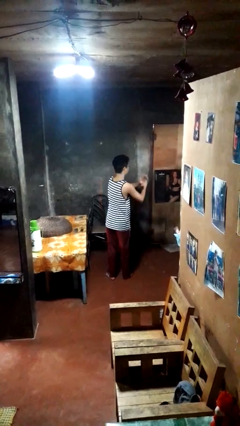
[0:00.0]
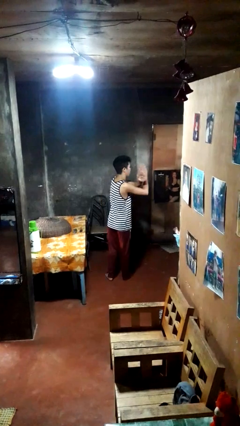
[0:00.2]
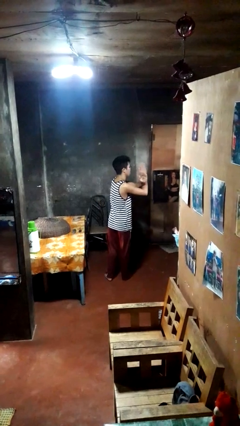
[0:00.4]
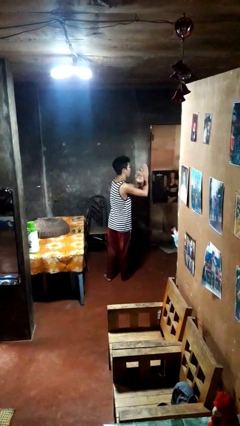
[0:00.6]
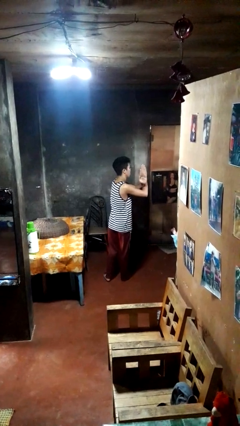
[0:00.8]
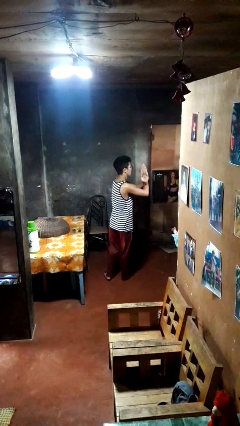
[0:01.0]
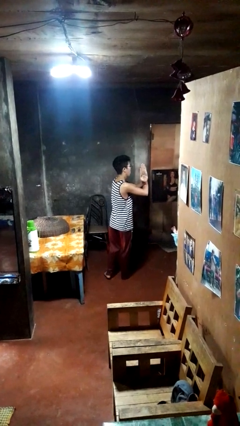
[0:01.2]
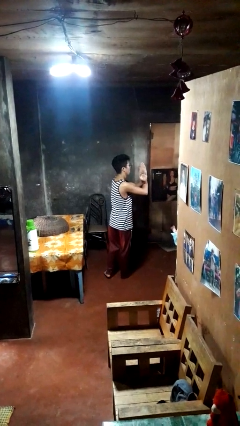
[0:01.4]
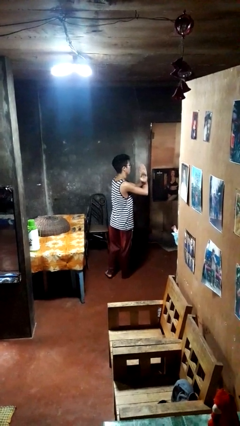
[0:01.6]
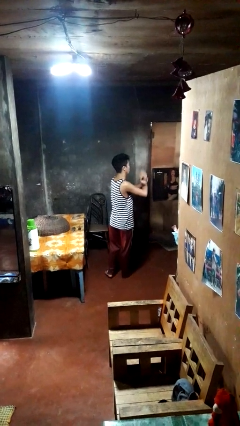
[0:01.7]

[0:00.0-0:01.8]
person gestures arms x

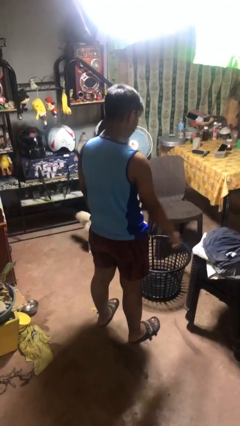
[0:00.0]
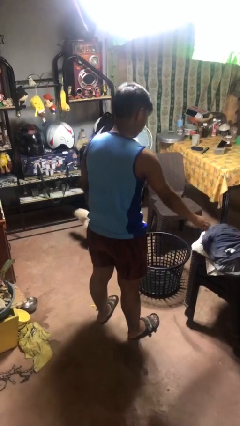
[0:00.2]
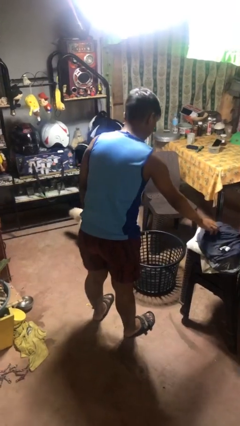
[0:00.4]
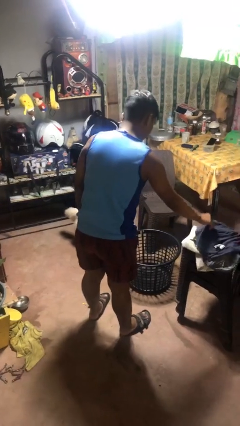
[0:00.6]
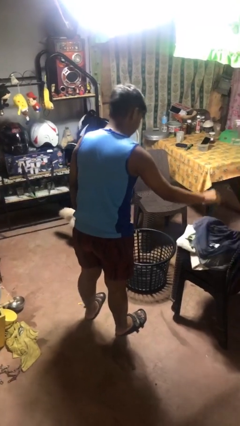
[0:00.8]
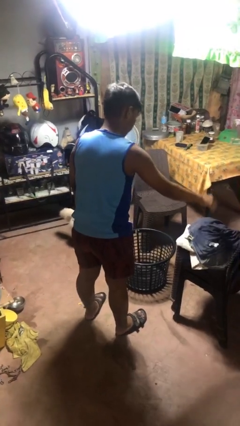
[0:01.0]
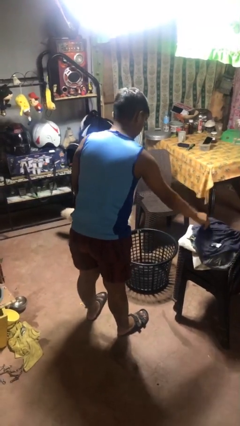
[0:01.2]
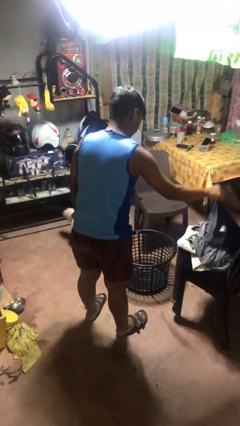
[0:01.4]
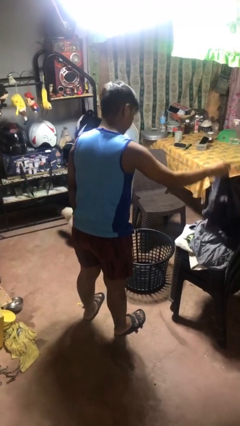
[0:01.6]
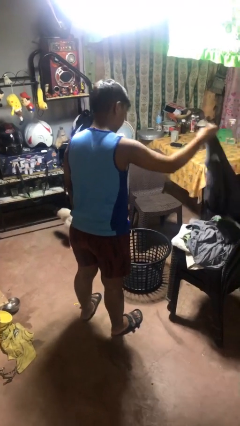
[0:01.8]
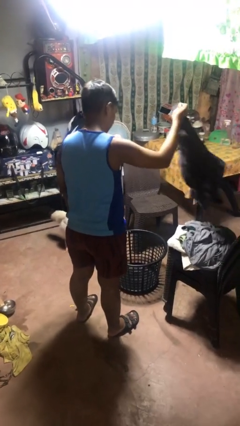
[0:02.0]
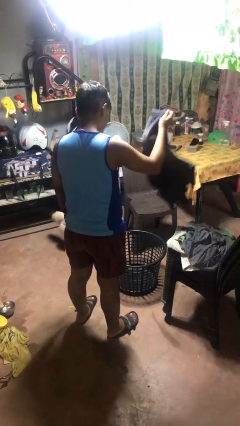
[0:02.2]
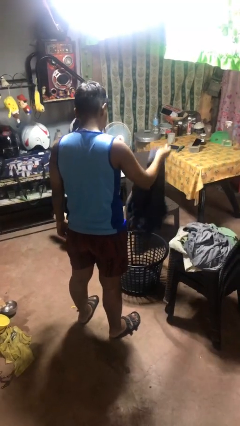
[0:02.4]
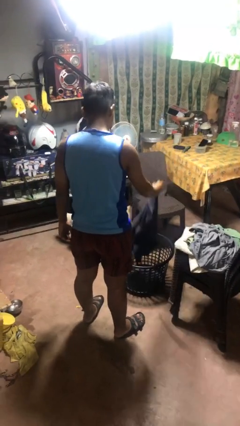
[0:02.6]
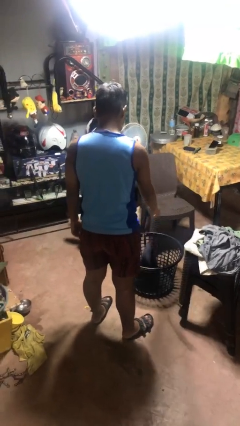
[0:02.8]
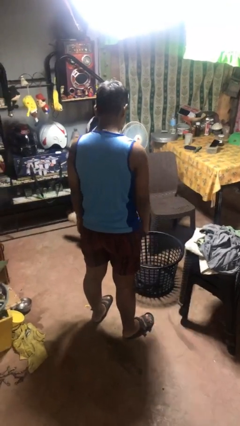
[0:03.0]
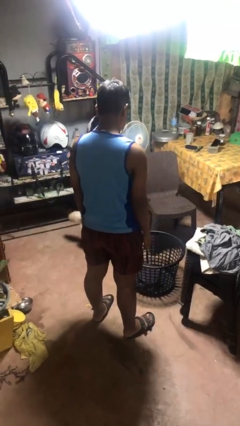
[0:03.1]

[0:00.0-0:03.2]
person puts object into basket

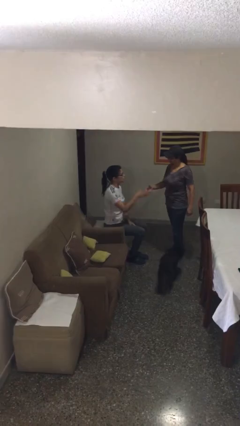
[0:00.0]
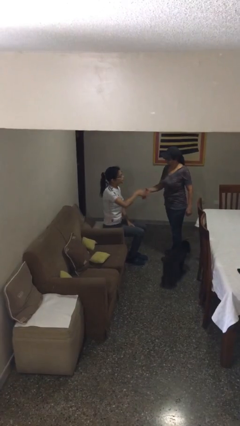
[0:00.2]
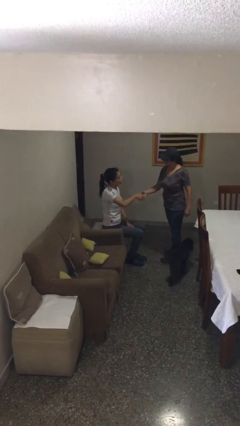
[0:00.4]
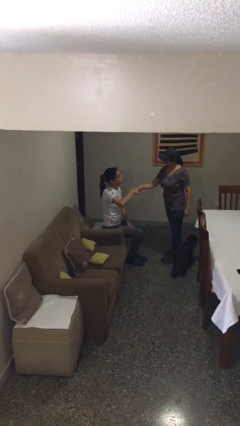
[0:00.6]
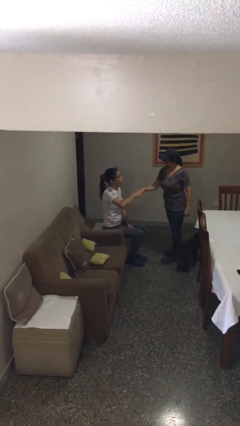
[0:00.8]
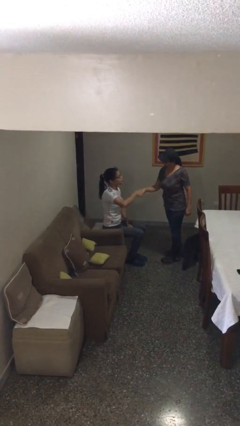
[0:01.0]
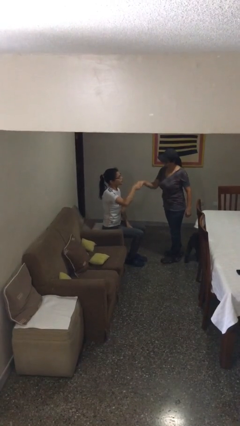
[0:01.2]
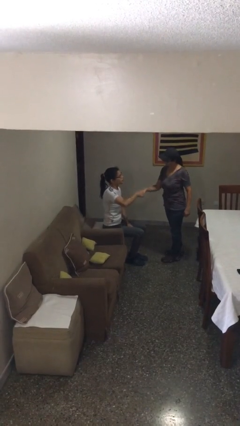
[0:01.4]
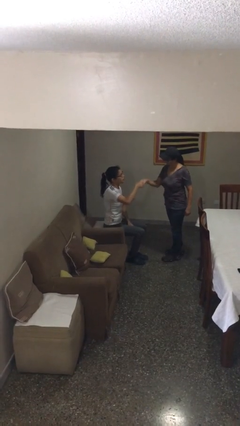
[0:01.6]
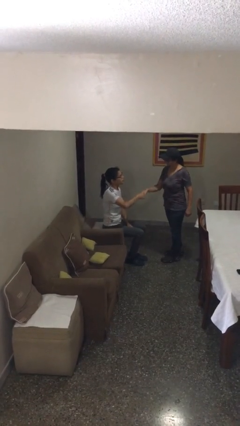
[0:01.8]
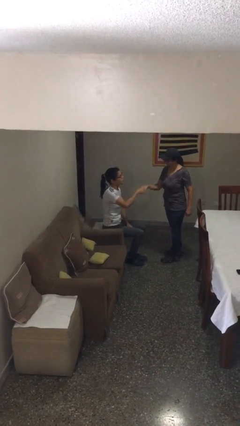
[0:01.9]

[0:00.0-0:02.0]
person shakes hand

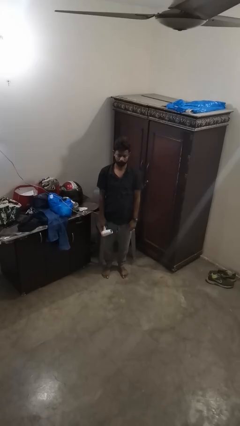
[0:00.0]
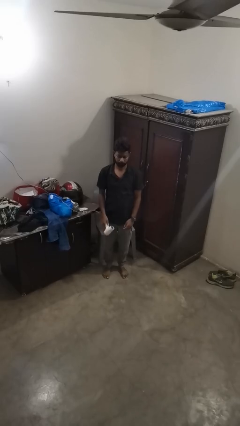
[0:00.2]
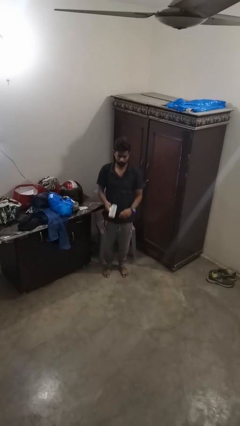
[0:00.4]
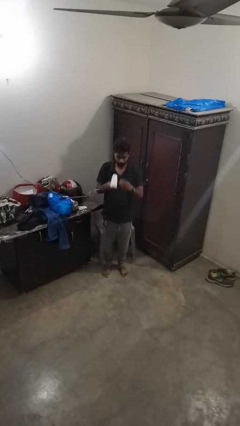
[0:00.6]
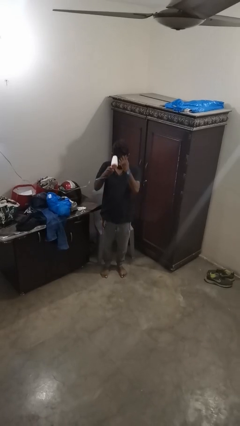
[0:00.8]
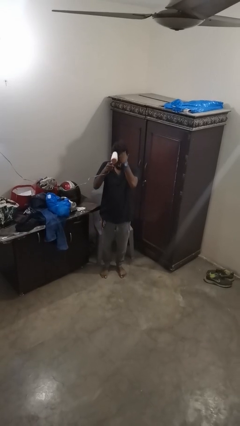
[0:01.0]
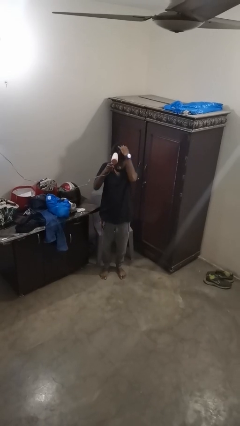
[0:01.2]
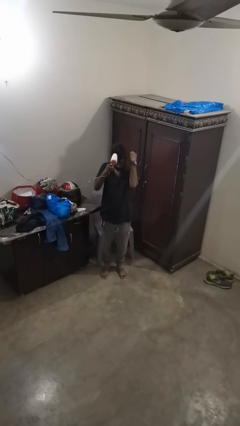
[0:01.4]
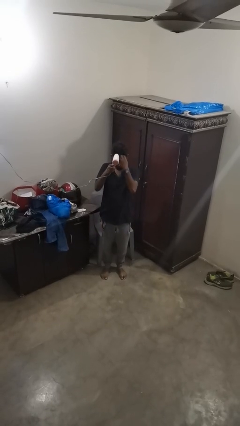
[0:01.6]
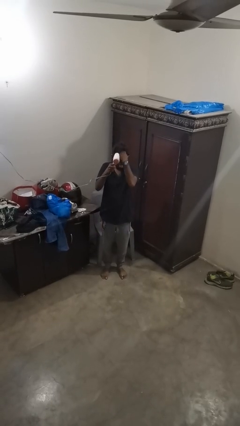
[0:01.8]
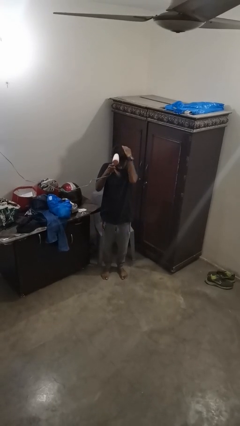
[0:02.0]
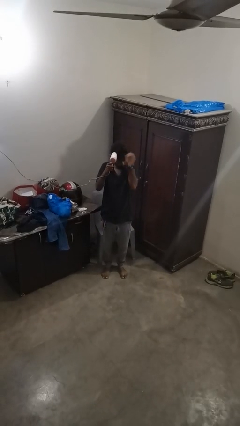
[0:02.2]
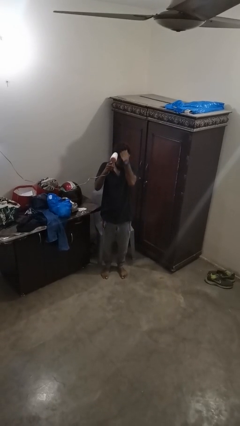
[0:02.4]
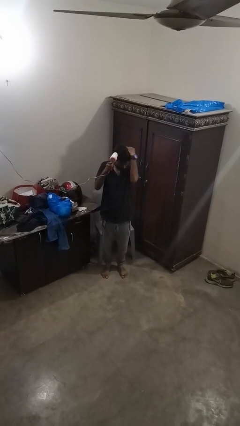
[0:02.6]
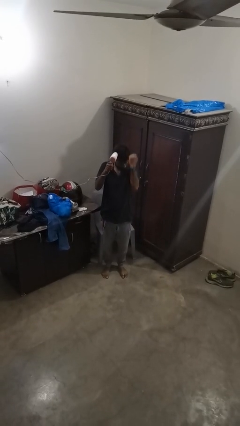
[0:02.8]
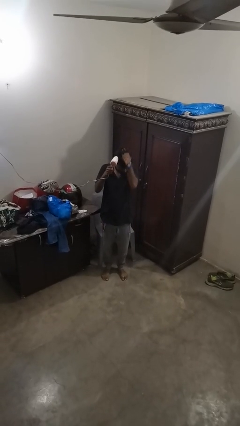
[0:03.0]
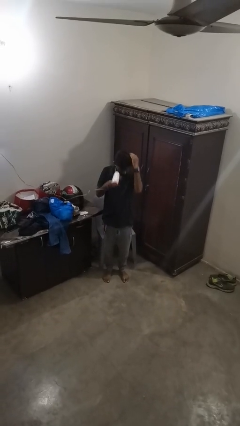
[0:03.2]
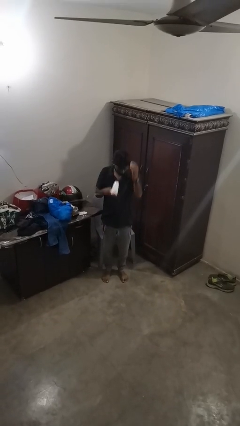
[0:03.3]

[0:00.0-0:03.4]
person dries hair with hairdryer

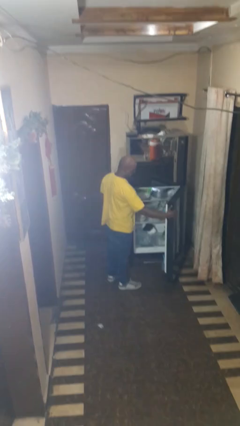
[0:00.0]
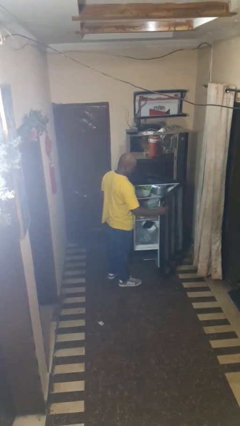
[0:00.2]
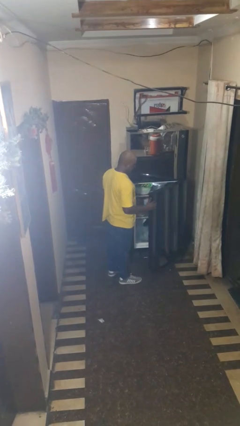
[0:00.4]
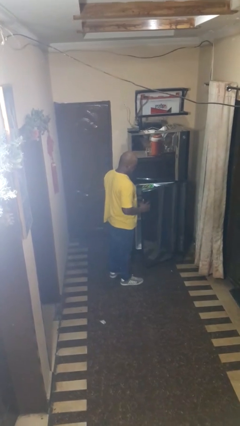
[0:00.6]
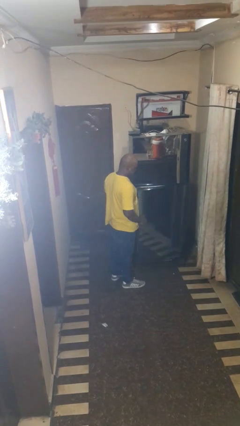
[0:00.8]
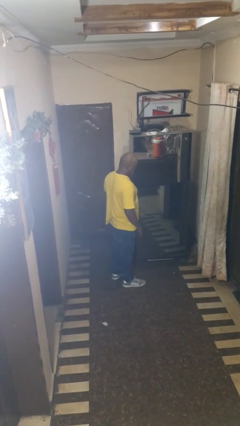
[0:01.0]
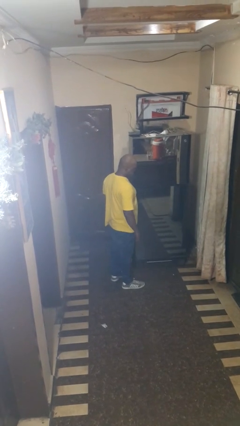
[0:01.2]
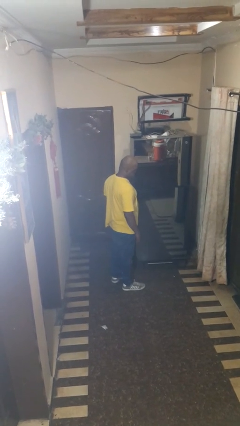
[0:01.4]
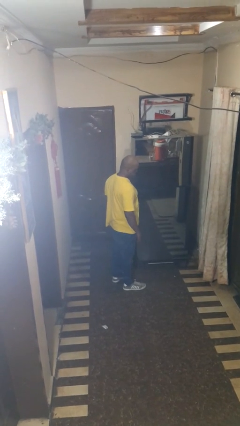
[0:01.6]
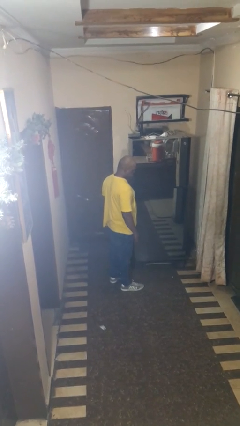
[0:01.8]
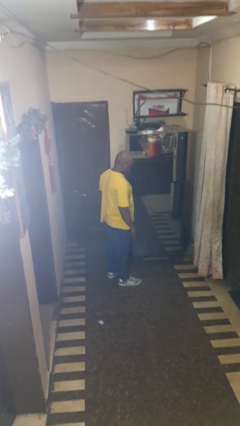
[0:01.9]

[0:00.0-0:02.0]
person closes refrigerator

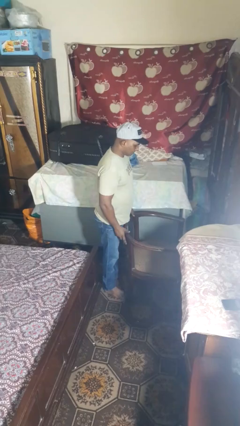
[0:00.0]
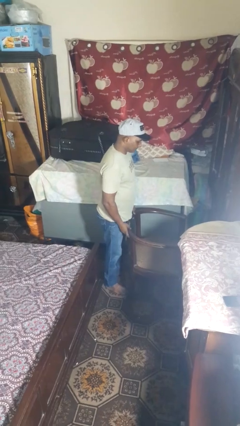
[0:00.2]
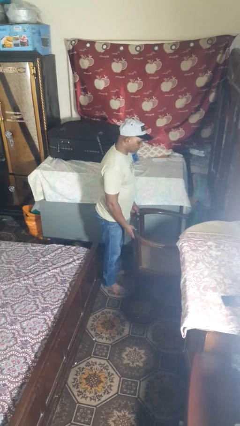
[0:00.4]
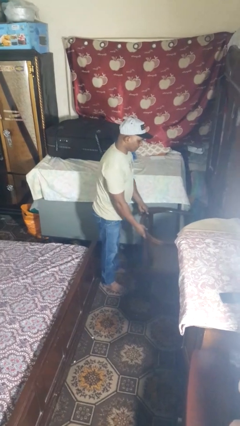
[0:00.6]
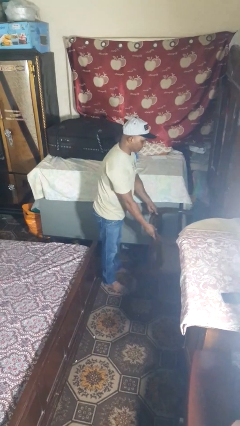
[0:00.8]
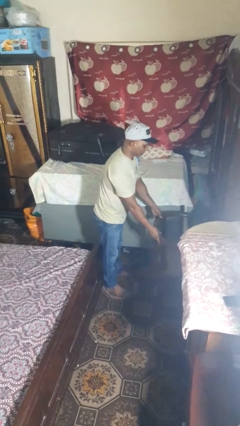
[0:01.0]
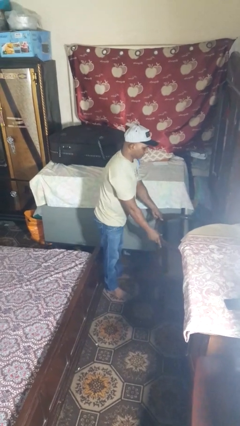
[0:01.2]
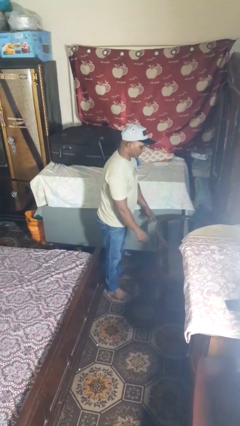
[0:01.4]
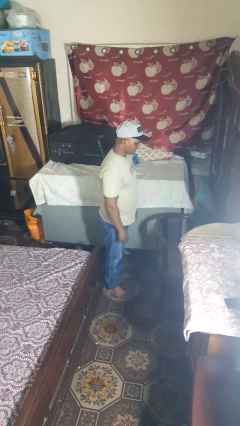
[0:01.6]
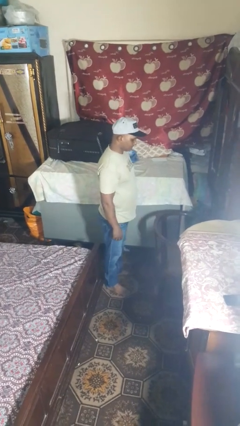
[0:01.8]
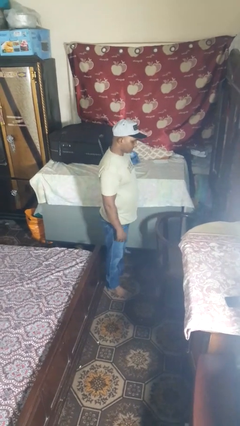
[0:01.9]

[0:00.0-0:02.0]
person pushes in chair

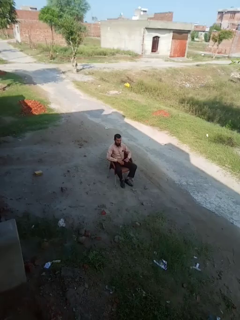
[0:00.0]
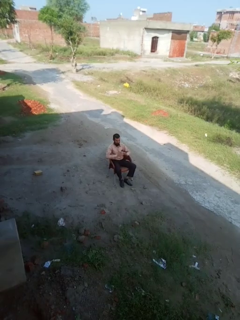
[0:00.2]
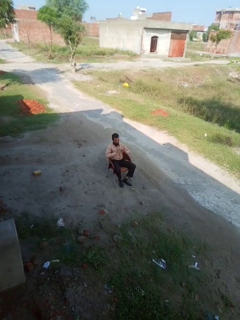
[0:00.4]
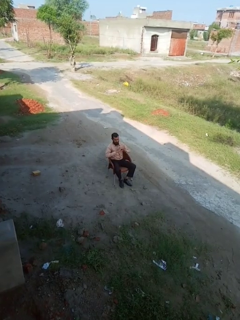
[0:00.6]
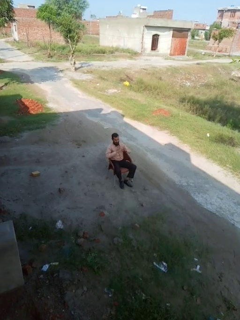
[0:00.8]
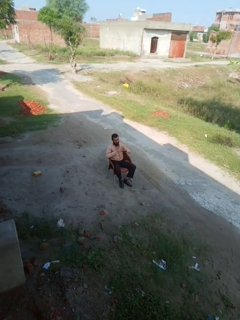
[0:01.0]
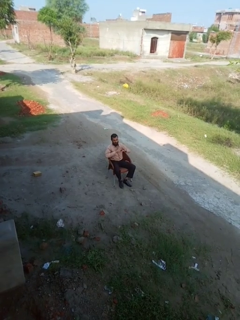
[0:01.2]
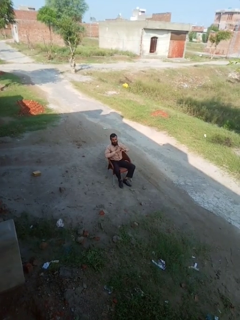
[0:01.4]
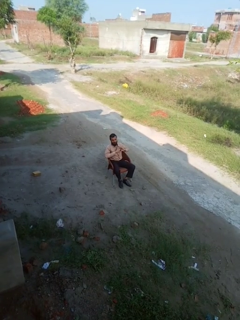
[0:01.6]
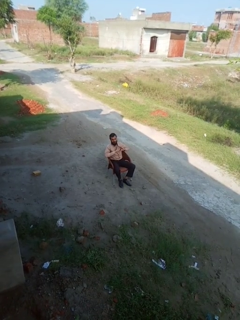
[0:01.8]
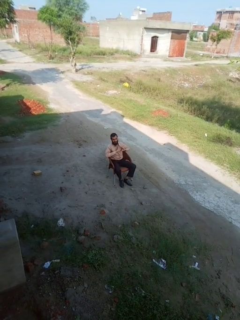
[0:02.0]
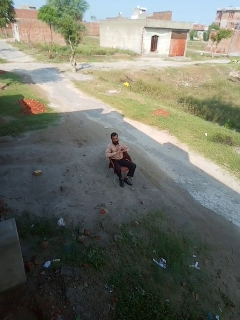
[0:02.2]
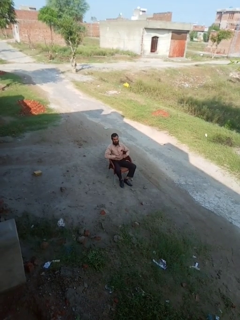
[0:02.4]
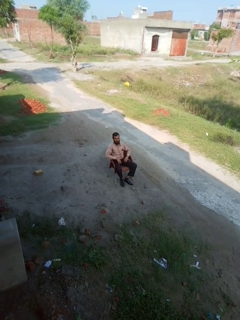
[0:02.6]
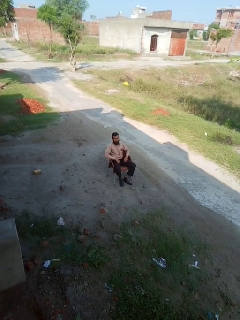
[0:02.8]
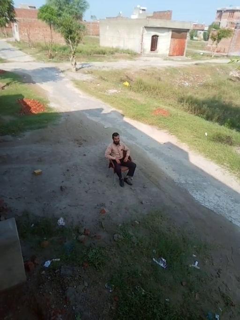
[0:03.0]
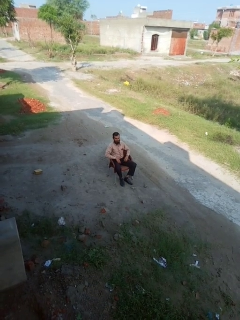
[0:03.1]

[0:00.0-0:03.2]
person gestures heart

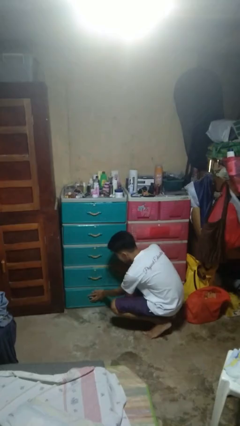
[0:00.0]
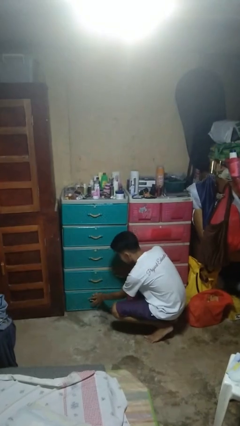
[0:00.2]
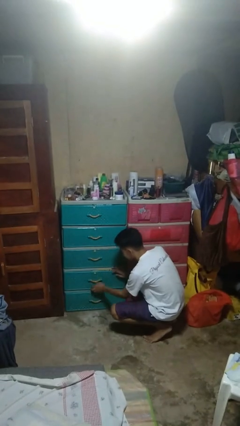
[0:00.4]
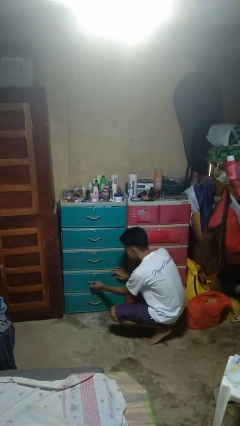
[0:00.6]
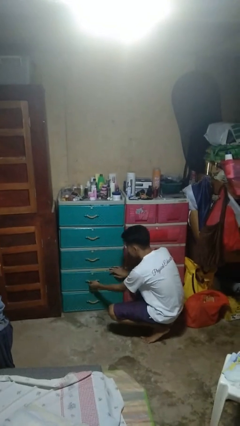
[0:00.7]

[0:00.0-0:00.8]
person opens dresser drawer
